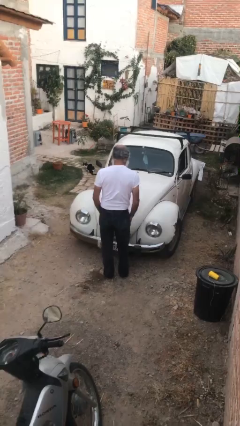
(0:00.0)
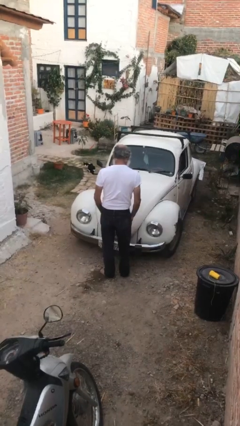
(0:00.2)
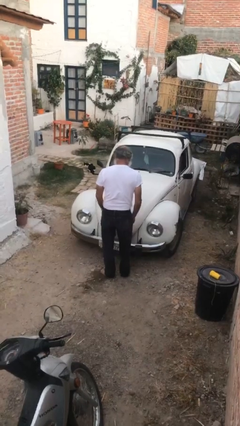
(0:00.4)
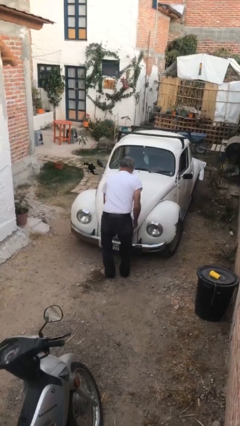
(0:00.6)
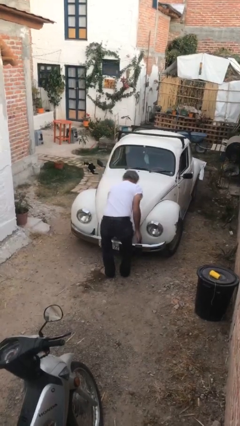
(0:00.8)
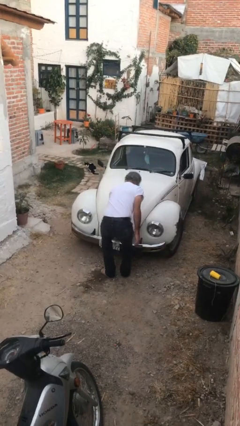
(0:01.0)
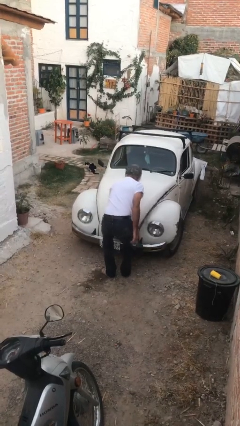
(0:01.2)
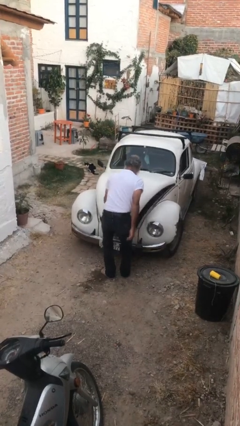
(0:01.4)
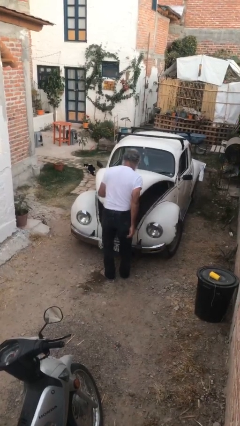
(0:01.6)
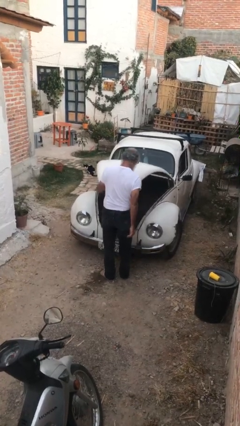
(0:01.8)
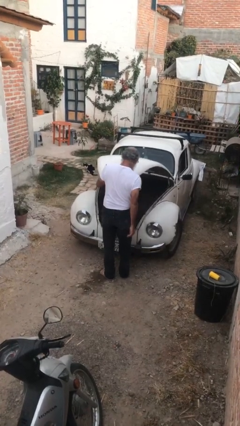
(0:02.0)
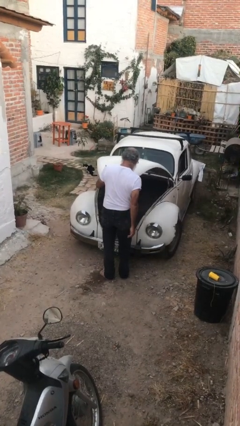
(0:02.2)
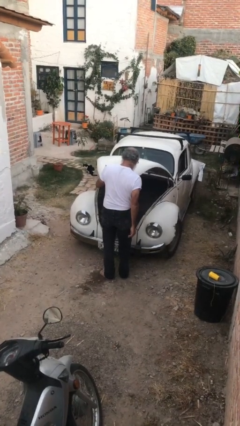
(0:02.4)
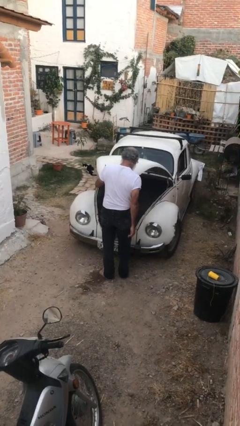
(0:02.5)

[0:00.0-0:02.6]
person opens car trunk

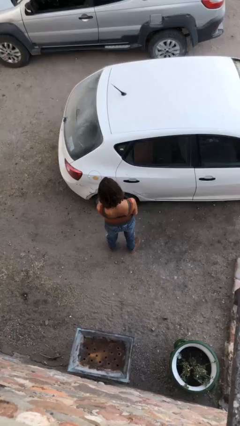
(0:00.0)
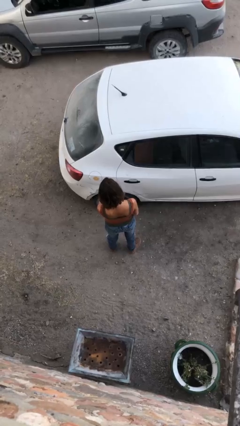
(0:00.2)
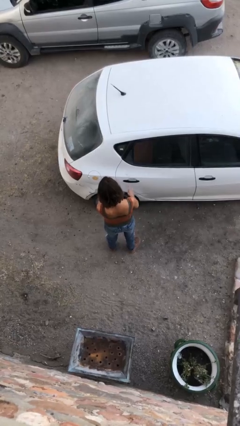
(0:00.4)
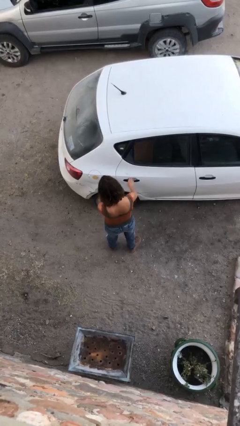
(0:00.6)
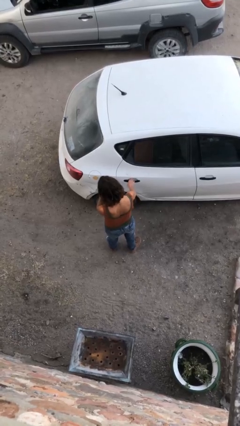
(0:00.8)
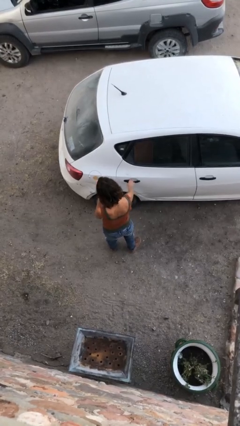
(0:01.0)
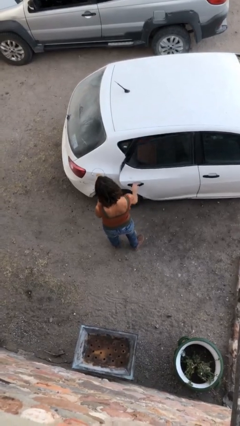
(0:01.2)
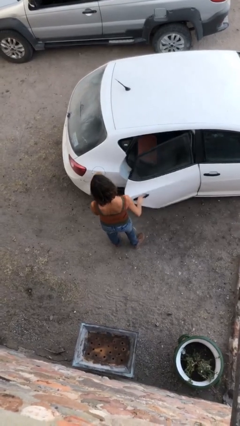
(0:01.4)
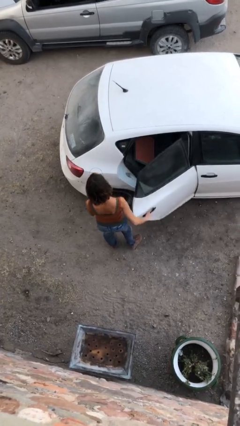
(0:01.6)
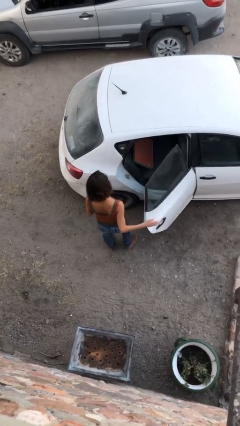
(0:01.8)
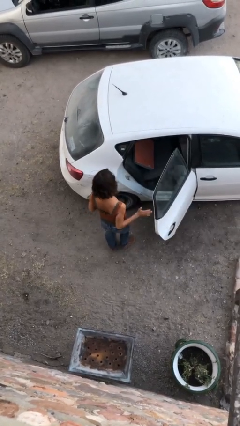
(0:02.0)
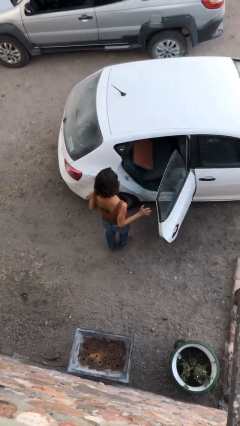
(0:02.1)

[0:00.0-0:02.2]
person opens car door

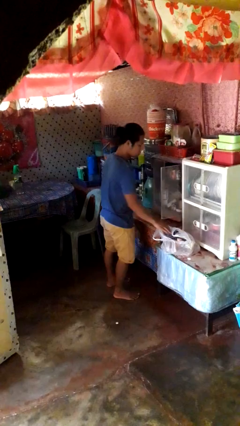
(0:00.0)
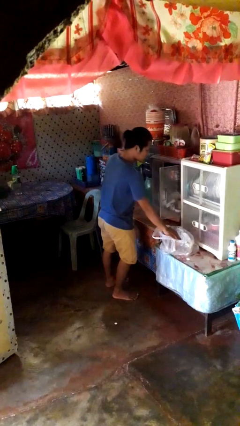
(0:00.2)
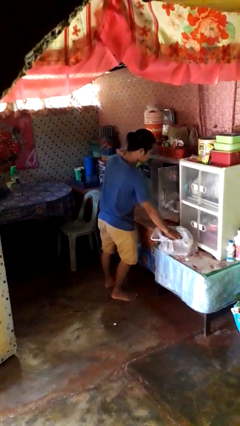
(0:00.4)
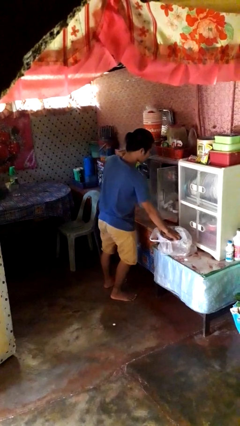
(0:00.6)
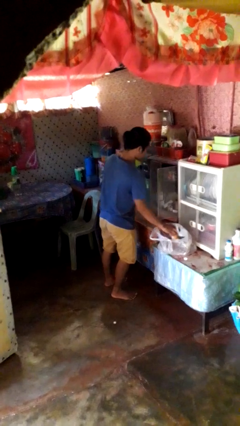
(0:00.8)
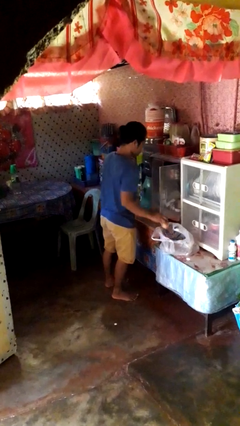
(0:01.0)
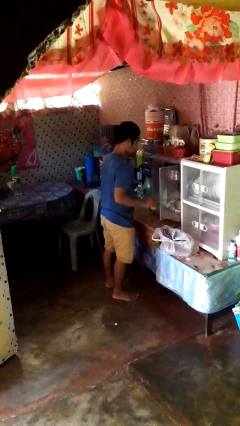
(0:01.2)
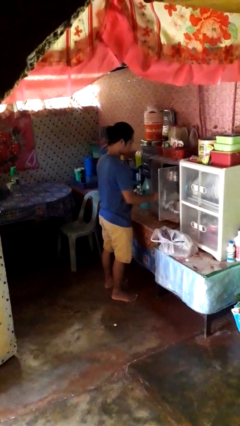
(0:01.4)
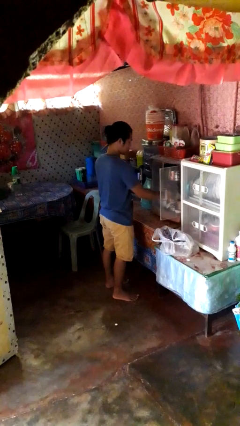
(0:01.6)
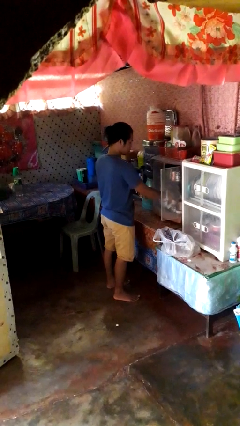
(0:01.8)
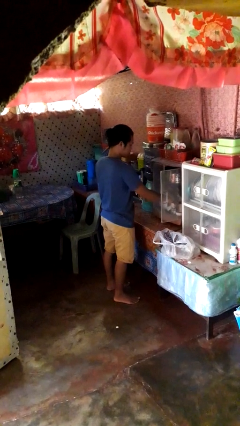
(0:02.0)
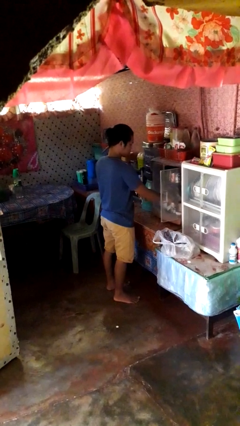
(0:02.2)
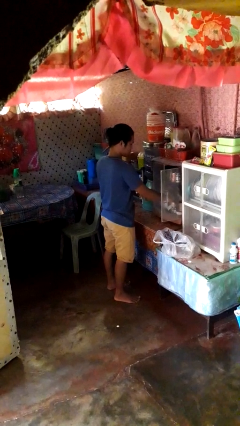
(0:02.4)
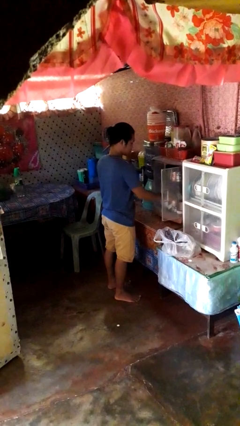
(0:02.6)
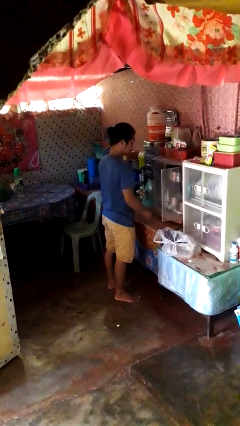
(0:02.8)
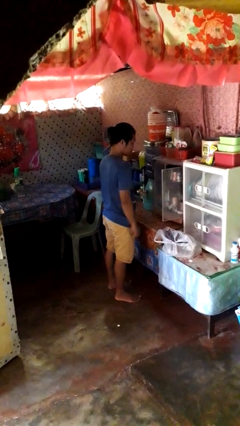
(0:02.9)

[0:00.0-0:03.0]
person loads groceries into cabinet

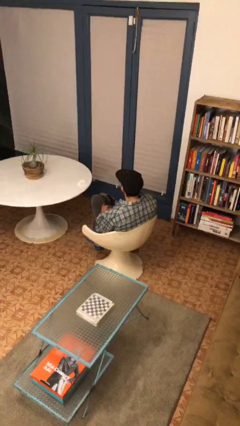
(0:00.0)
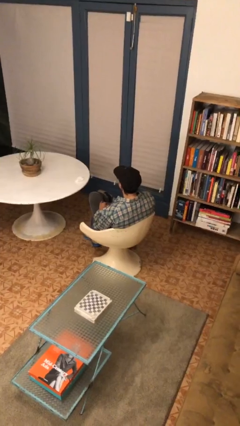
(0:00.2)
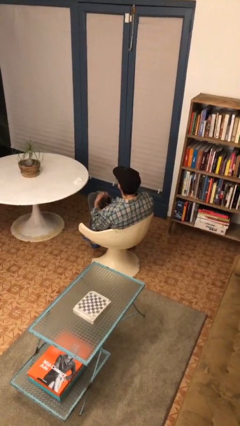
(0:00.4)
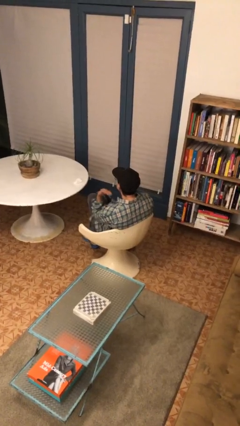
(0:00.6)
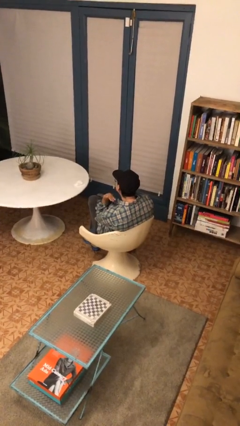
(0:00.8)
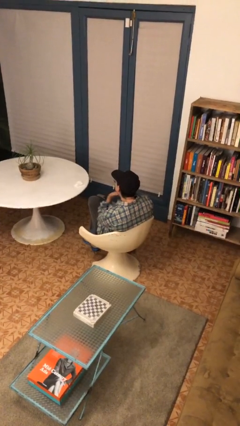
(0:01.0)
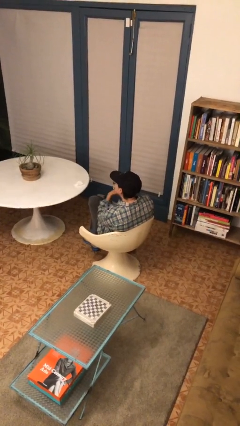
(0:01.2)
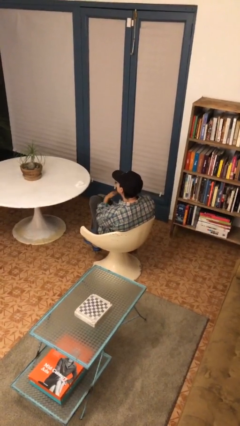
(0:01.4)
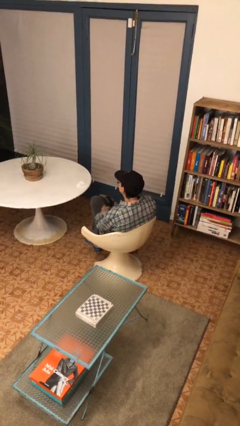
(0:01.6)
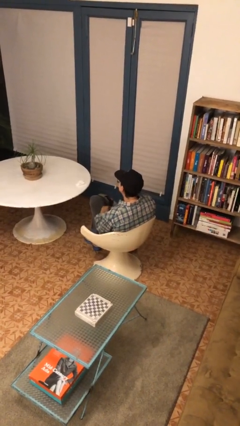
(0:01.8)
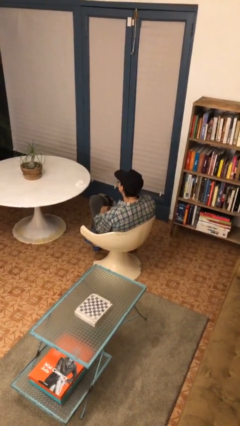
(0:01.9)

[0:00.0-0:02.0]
person gestures cut

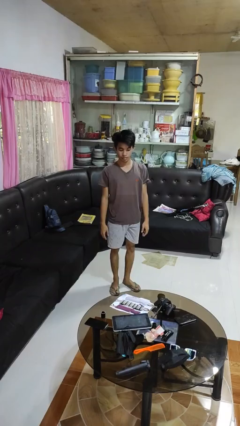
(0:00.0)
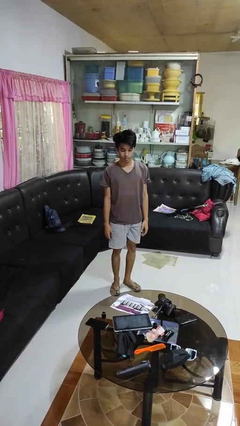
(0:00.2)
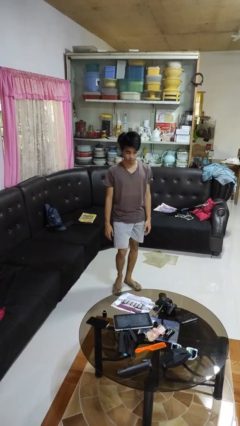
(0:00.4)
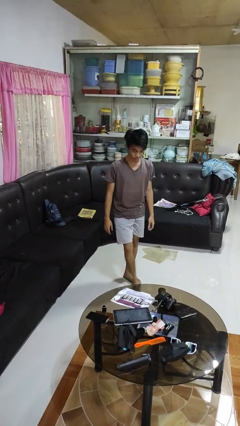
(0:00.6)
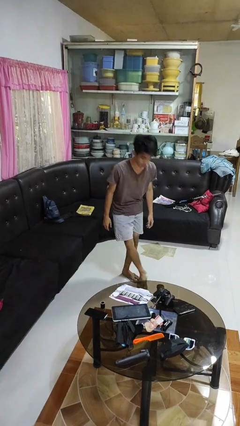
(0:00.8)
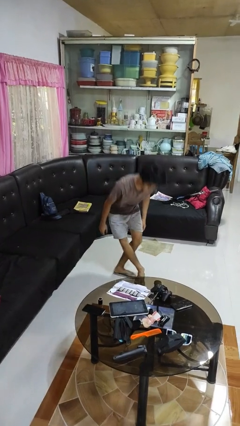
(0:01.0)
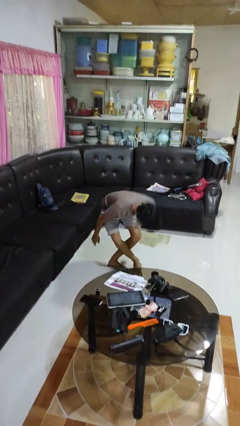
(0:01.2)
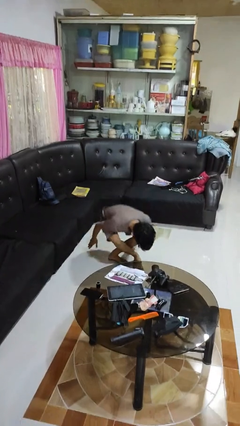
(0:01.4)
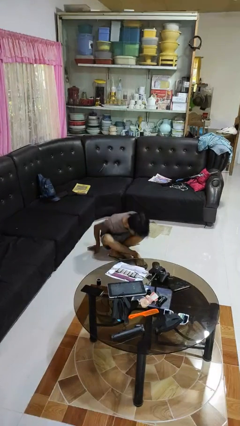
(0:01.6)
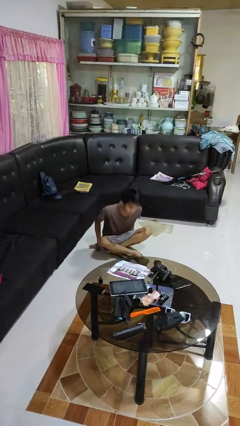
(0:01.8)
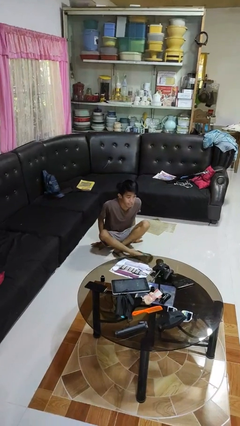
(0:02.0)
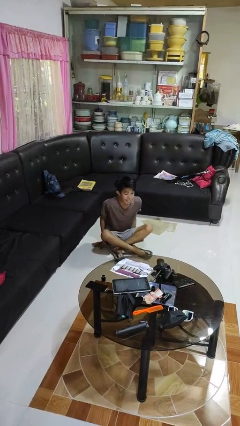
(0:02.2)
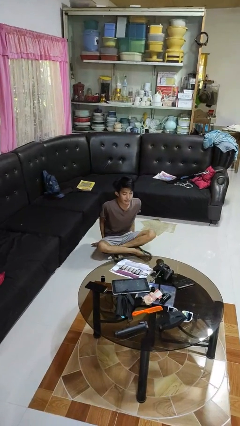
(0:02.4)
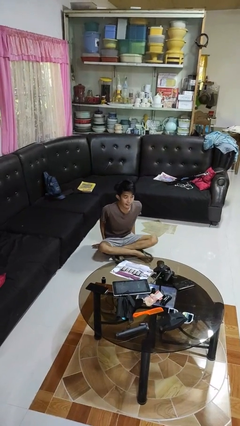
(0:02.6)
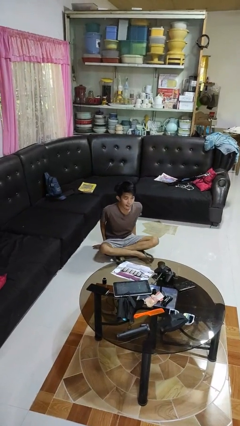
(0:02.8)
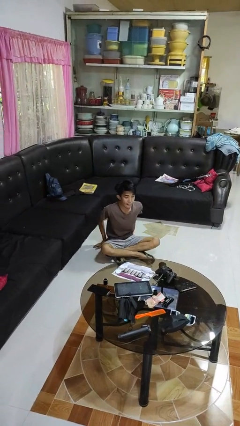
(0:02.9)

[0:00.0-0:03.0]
person sits crisscross

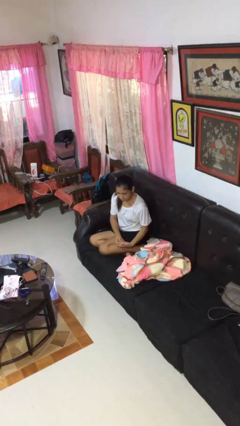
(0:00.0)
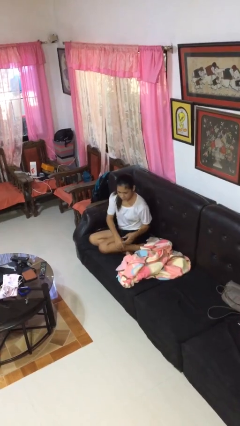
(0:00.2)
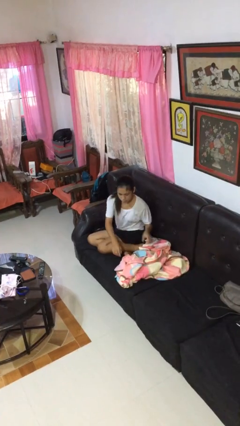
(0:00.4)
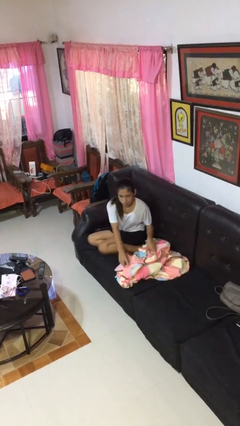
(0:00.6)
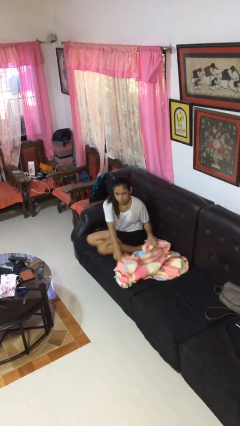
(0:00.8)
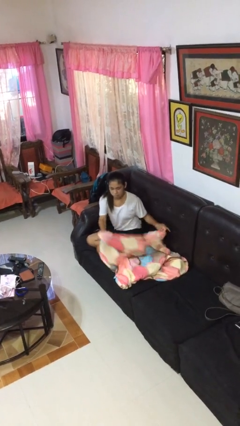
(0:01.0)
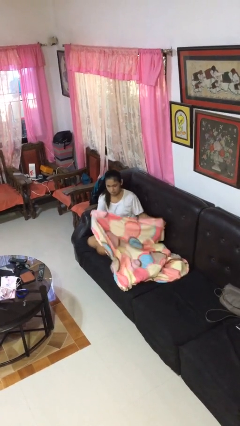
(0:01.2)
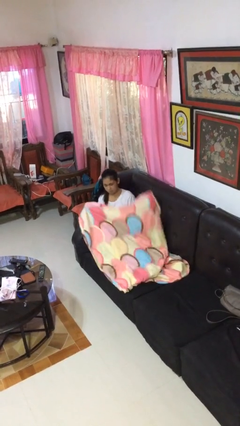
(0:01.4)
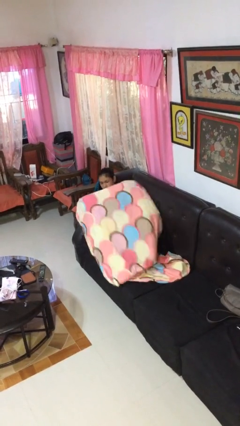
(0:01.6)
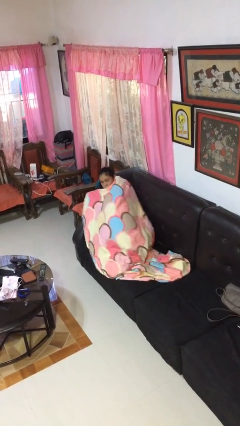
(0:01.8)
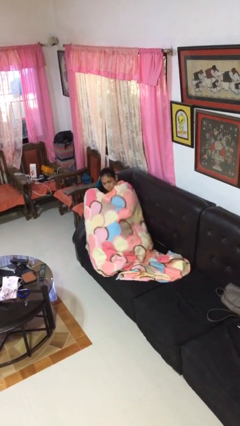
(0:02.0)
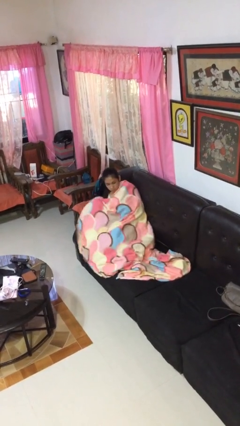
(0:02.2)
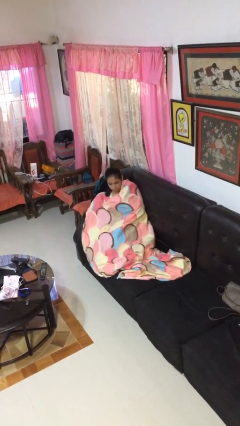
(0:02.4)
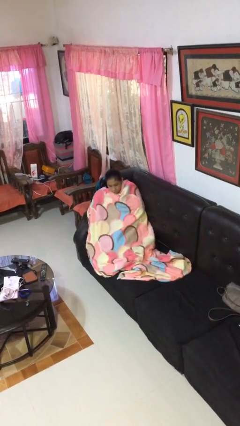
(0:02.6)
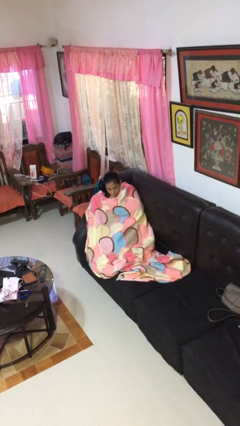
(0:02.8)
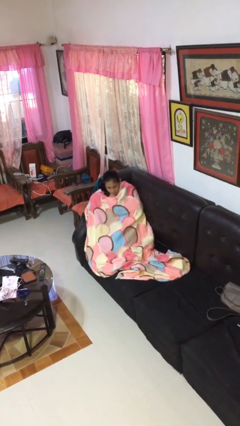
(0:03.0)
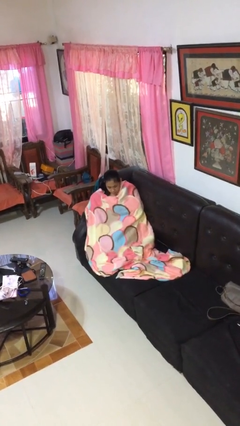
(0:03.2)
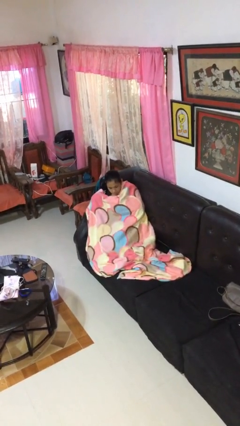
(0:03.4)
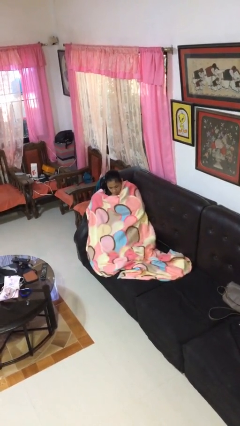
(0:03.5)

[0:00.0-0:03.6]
person covers with blanket

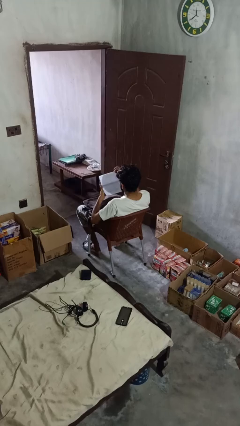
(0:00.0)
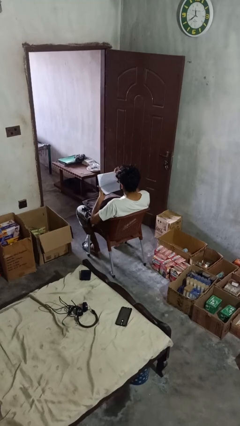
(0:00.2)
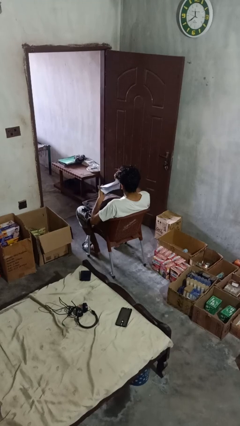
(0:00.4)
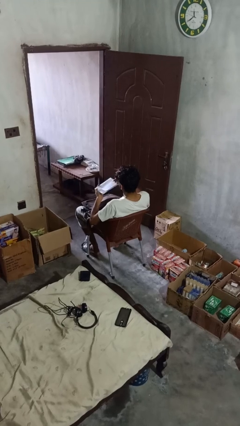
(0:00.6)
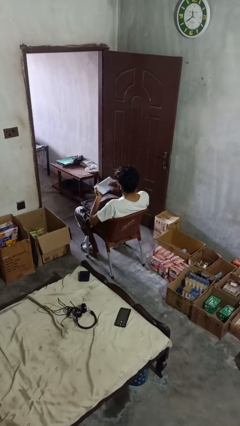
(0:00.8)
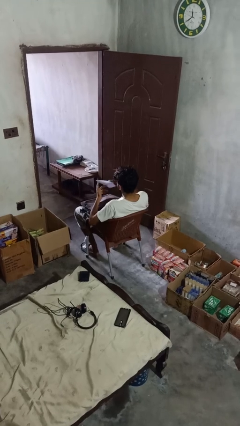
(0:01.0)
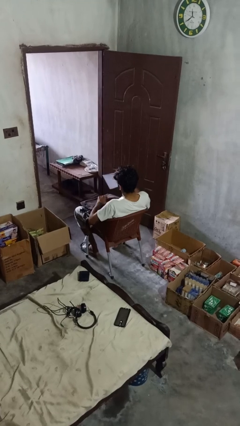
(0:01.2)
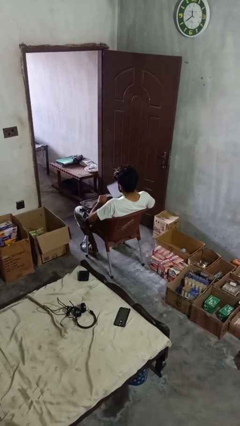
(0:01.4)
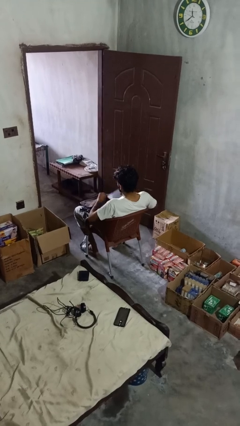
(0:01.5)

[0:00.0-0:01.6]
person takes object from backpack
